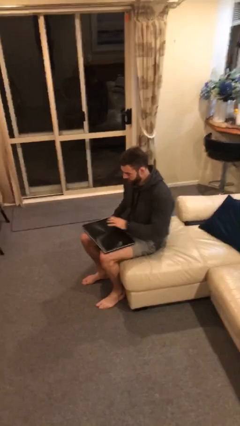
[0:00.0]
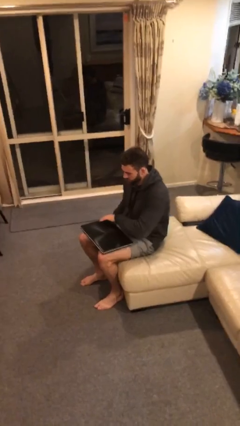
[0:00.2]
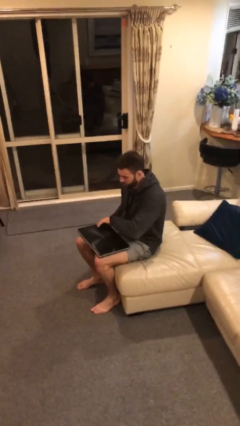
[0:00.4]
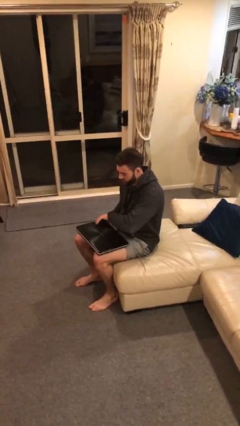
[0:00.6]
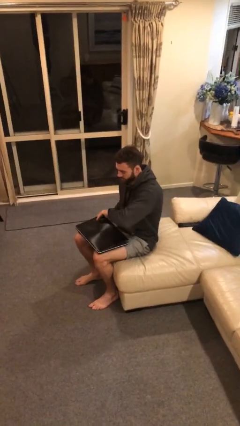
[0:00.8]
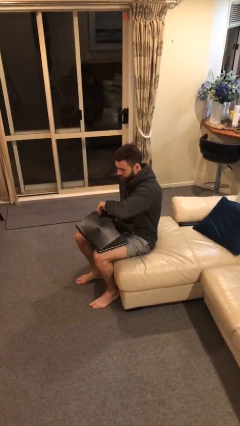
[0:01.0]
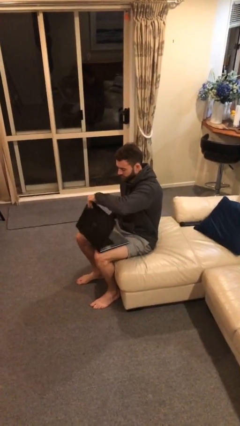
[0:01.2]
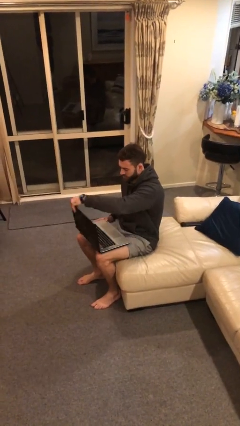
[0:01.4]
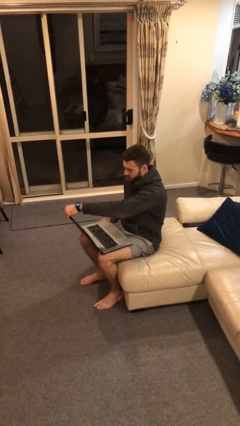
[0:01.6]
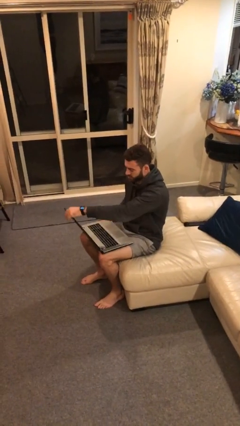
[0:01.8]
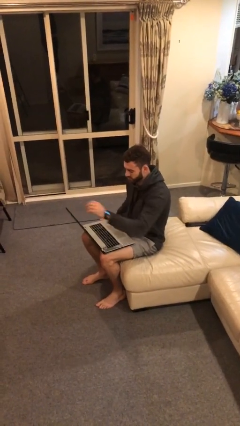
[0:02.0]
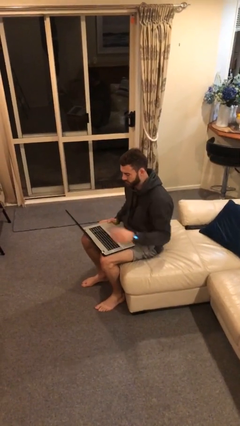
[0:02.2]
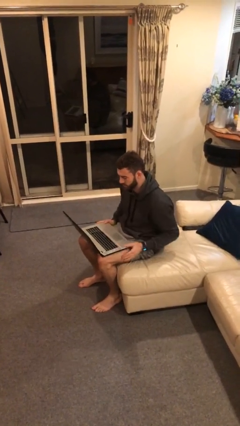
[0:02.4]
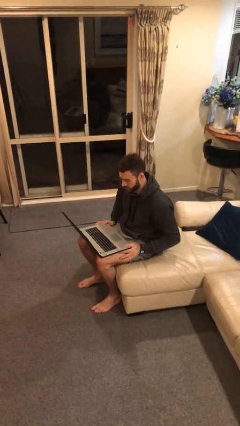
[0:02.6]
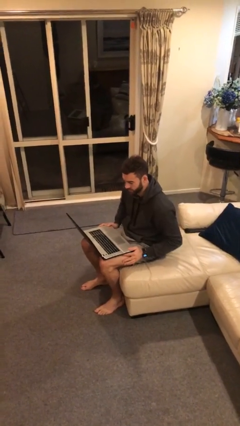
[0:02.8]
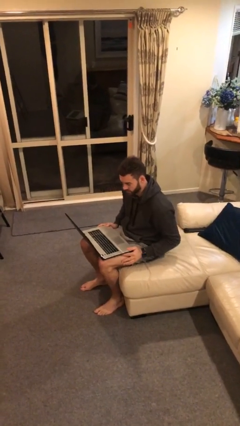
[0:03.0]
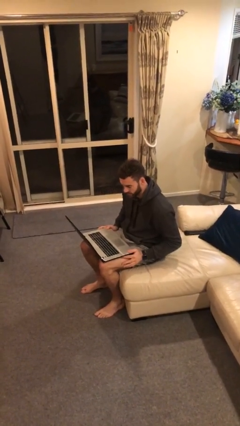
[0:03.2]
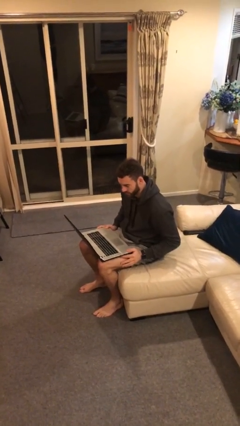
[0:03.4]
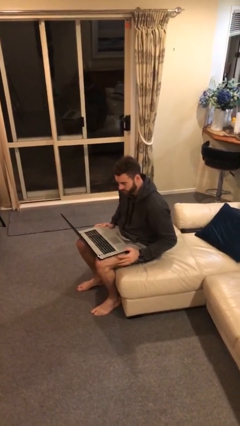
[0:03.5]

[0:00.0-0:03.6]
person opens laptop

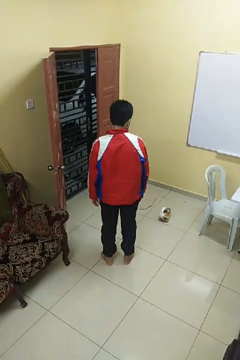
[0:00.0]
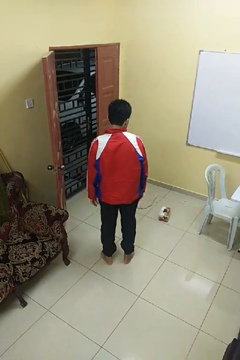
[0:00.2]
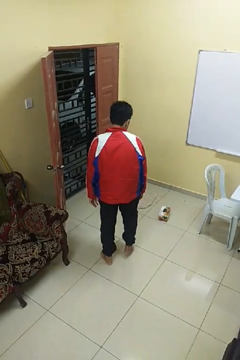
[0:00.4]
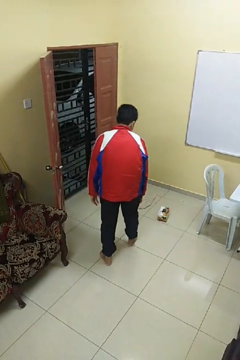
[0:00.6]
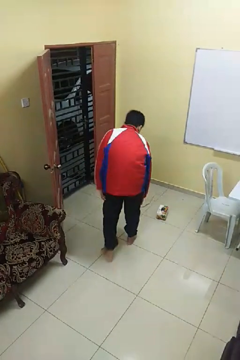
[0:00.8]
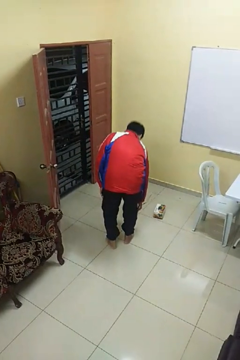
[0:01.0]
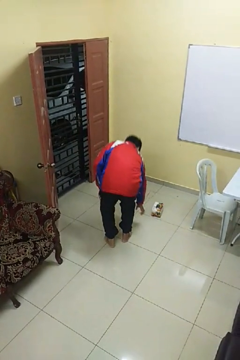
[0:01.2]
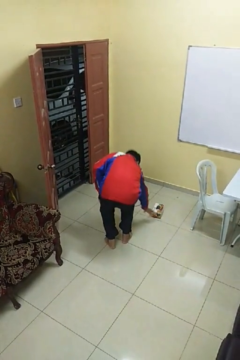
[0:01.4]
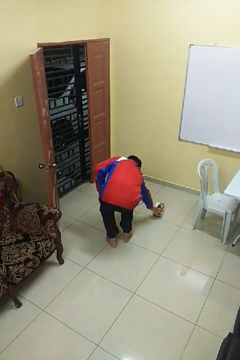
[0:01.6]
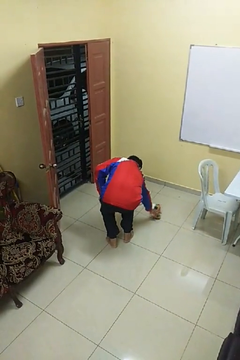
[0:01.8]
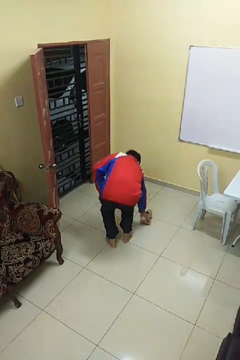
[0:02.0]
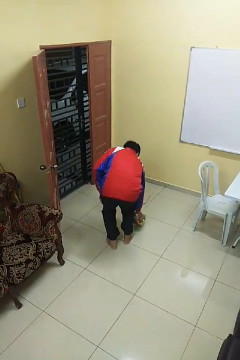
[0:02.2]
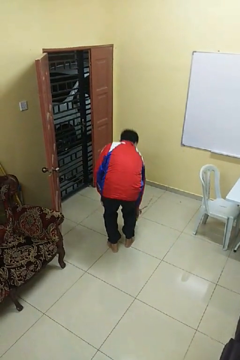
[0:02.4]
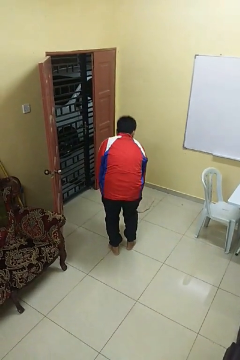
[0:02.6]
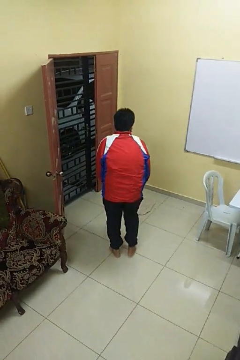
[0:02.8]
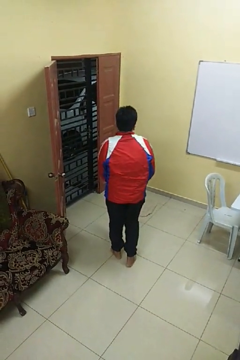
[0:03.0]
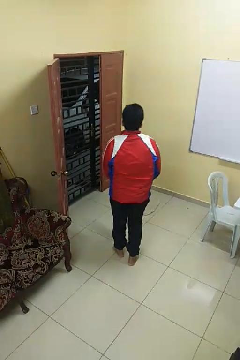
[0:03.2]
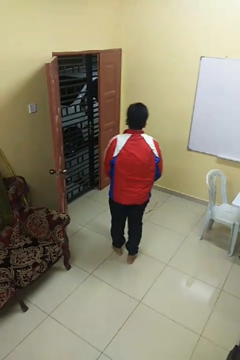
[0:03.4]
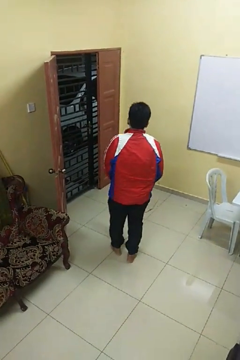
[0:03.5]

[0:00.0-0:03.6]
person picks up object from floor

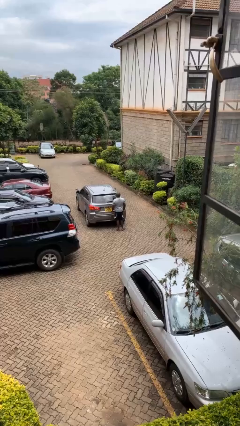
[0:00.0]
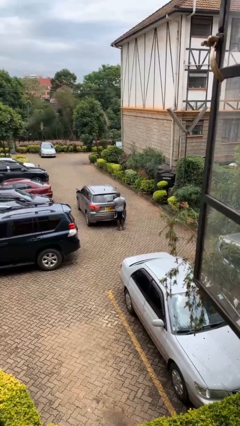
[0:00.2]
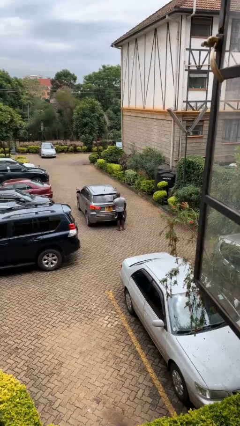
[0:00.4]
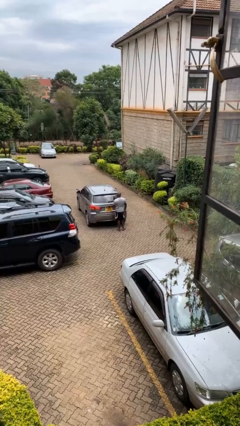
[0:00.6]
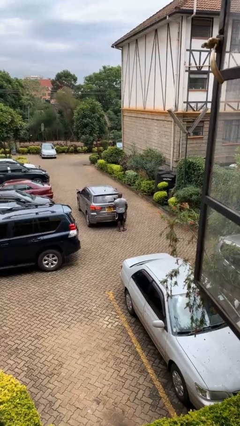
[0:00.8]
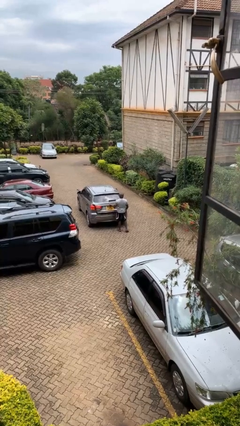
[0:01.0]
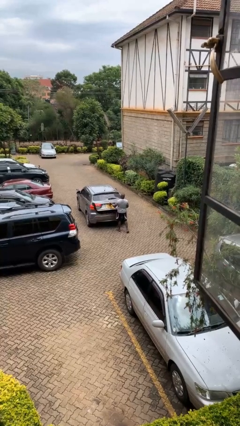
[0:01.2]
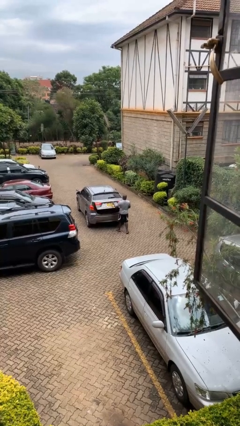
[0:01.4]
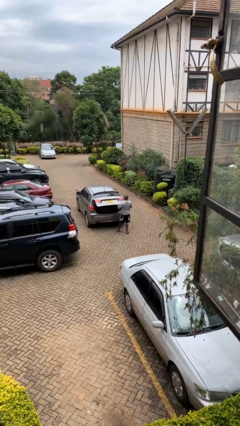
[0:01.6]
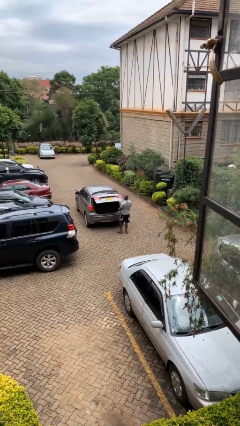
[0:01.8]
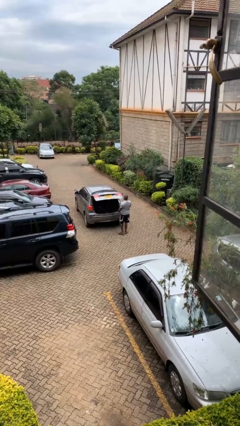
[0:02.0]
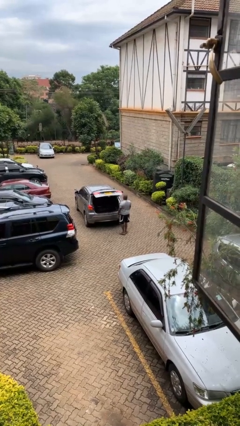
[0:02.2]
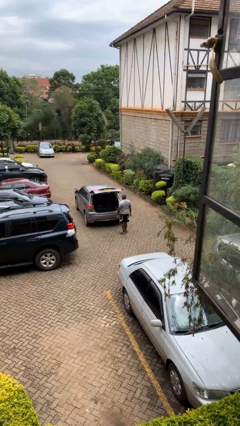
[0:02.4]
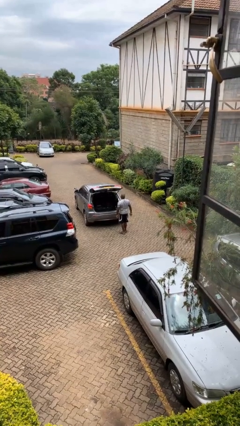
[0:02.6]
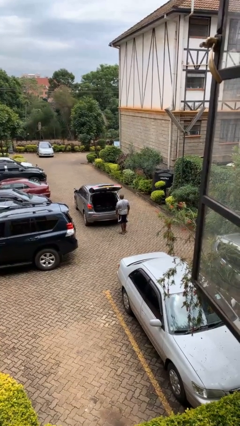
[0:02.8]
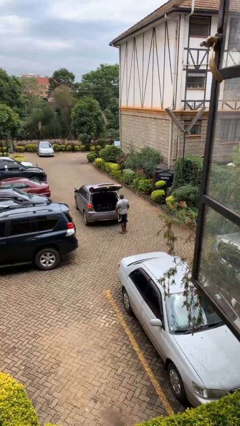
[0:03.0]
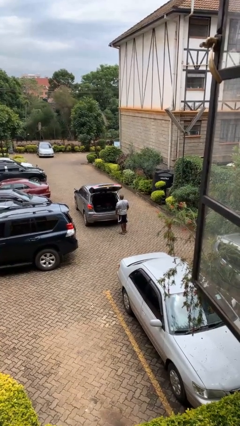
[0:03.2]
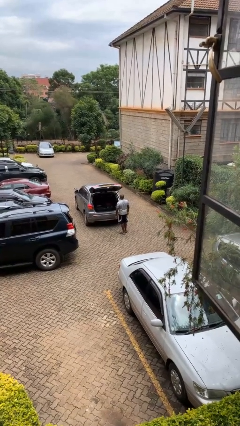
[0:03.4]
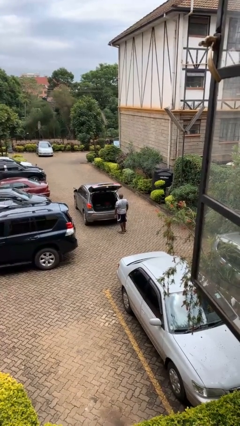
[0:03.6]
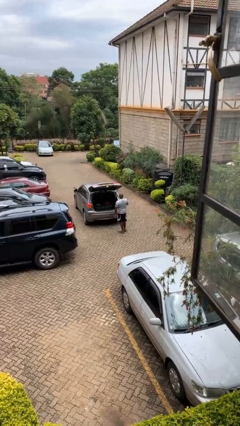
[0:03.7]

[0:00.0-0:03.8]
person opens car trunk

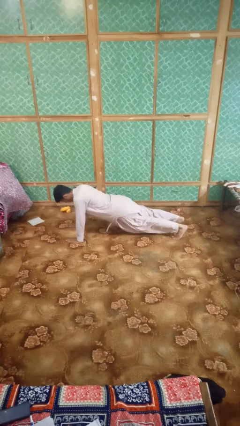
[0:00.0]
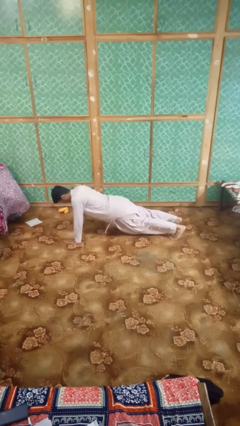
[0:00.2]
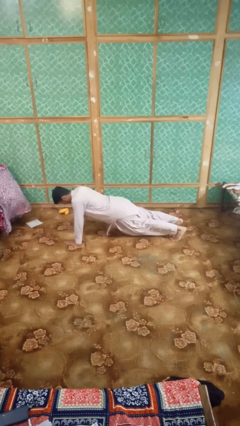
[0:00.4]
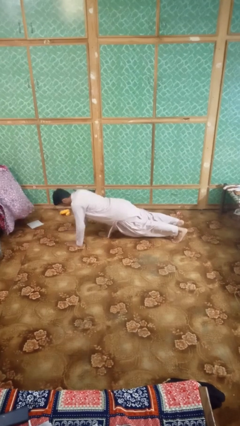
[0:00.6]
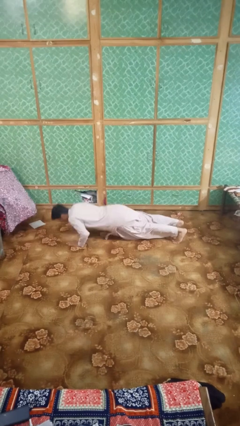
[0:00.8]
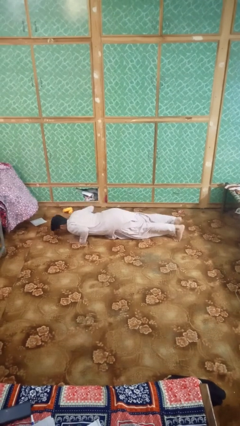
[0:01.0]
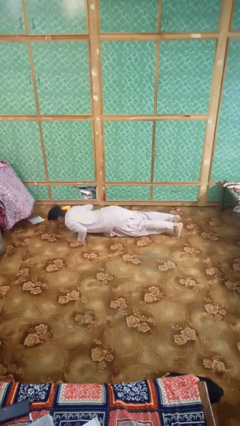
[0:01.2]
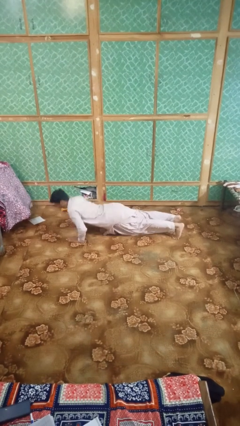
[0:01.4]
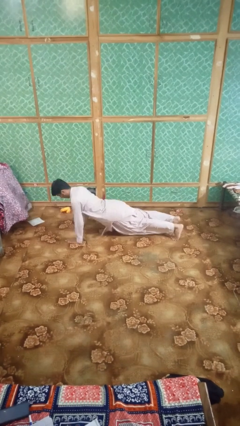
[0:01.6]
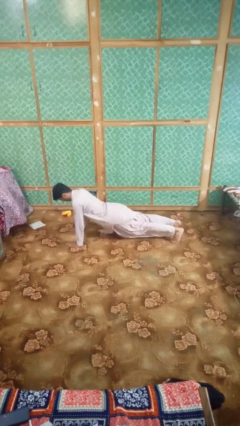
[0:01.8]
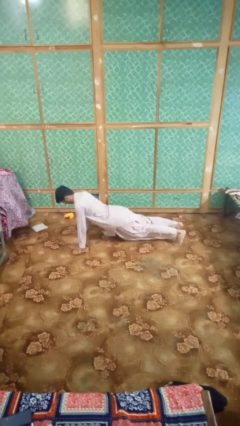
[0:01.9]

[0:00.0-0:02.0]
person exercises with pushup

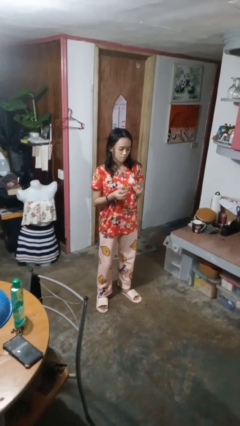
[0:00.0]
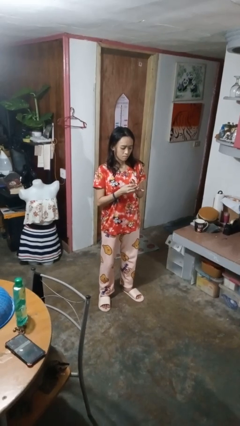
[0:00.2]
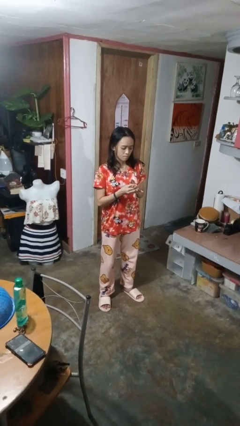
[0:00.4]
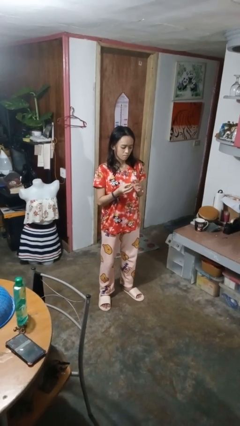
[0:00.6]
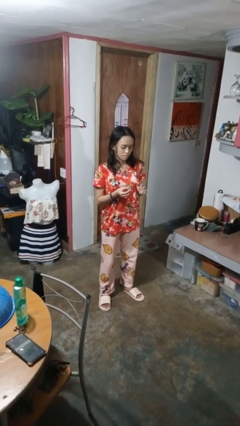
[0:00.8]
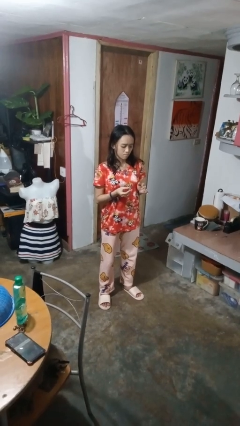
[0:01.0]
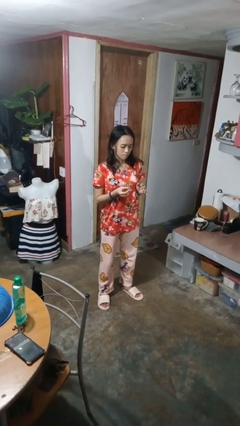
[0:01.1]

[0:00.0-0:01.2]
person takes off ring

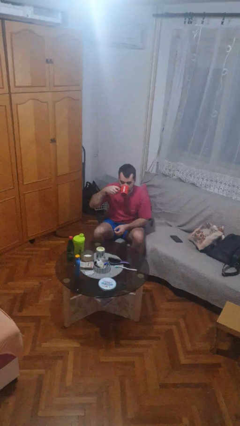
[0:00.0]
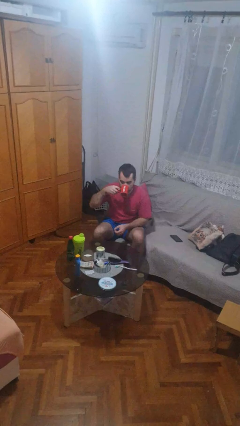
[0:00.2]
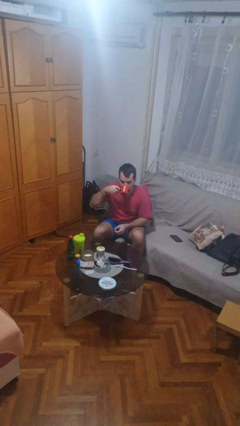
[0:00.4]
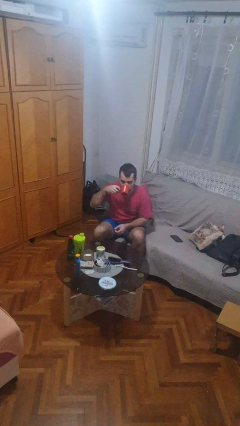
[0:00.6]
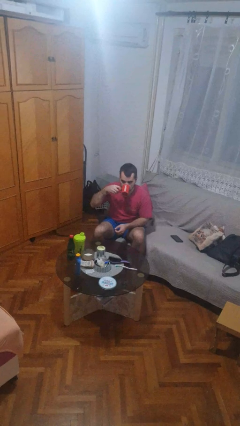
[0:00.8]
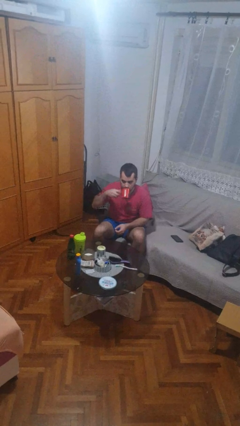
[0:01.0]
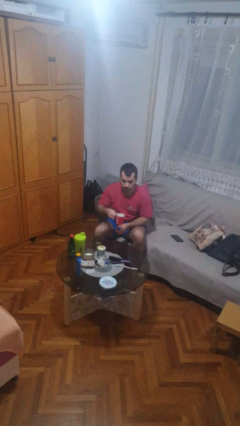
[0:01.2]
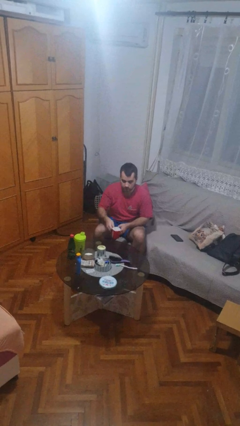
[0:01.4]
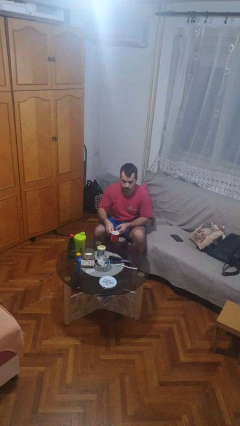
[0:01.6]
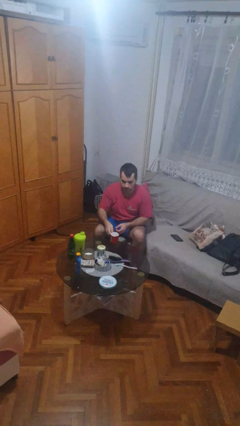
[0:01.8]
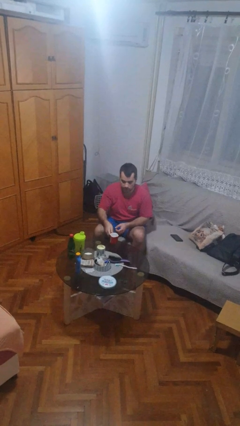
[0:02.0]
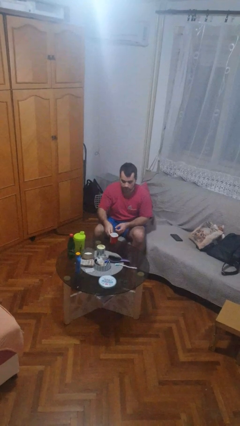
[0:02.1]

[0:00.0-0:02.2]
person puts down object on table

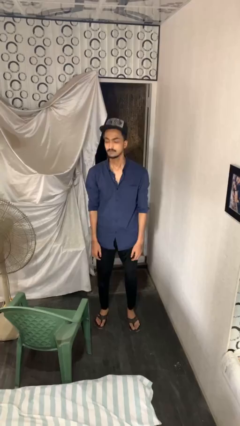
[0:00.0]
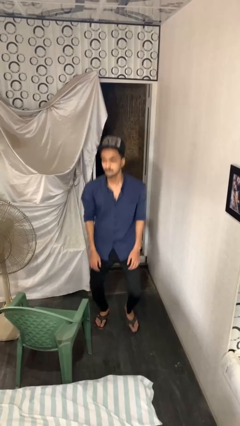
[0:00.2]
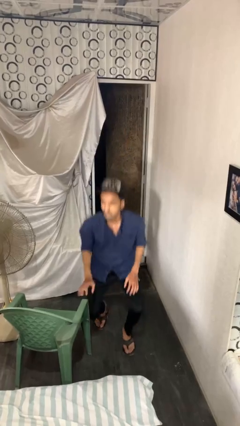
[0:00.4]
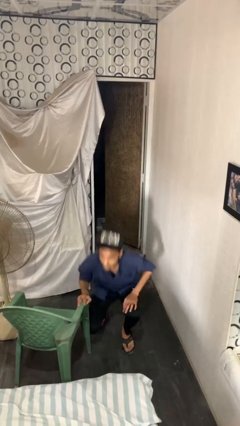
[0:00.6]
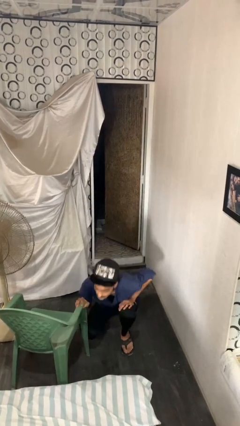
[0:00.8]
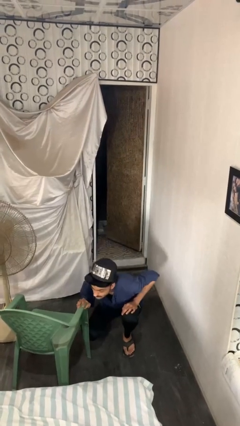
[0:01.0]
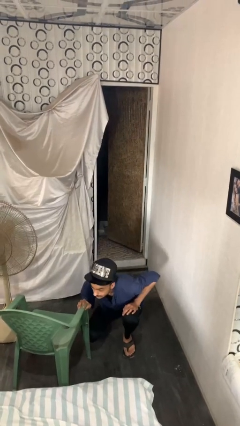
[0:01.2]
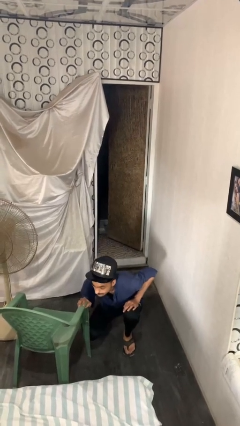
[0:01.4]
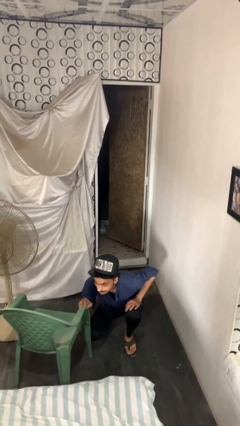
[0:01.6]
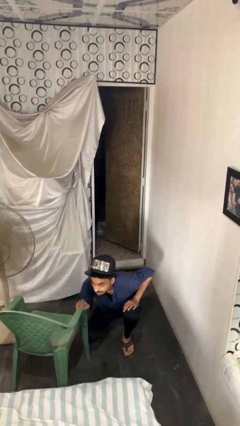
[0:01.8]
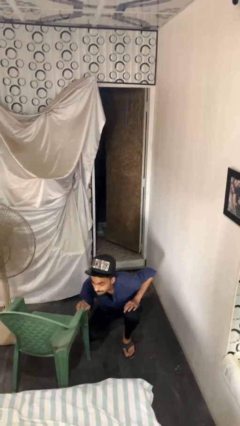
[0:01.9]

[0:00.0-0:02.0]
person trips on object on floor
